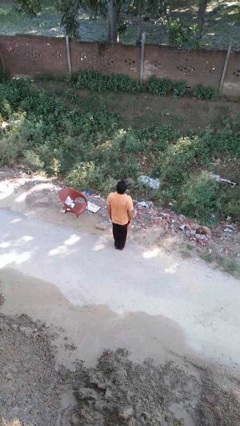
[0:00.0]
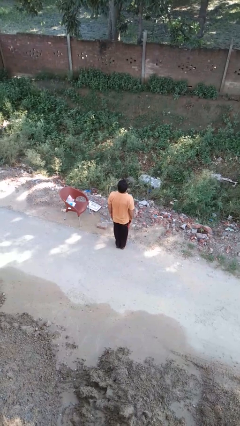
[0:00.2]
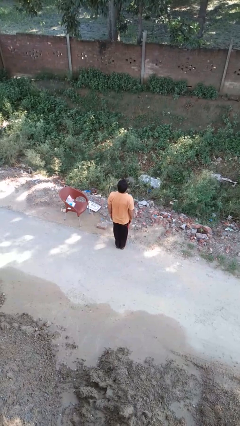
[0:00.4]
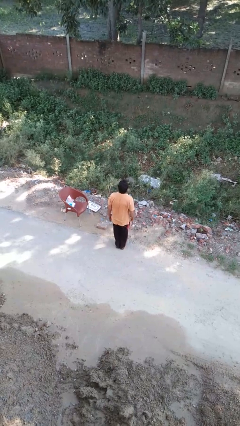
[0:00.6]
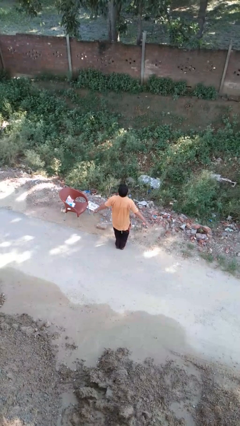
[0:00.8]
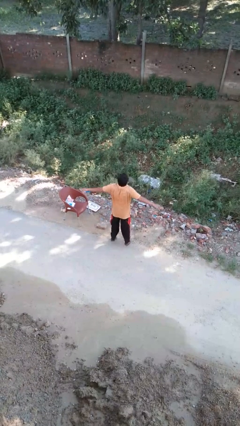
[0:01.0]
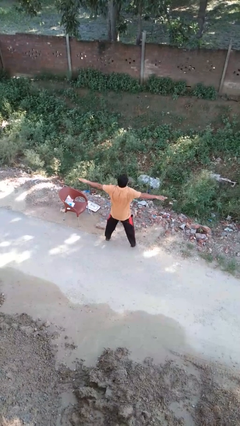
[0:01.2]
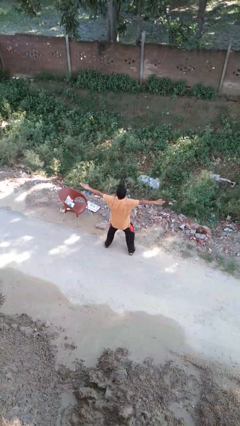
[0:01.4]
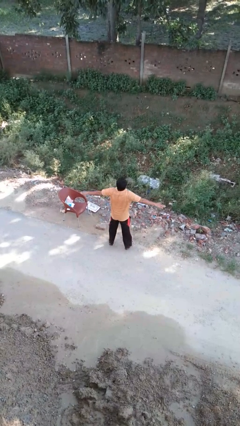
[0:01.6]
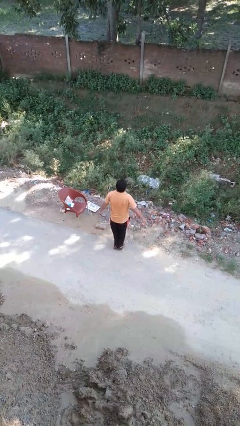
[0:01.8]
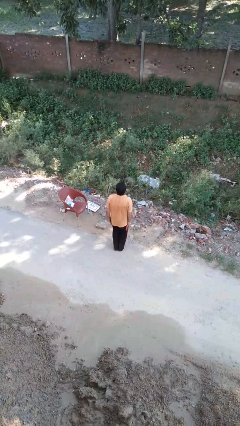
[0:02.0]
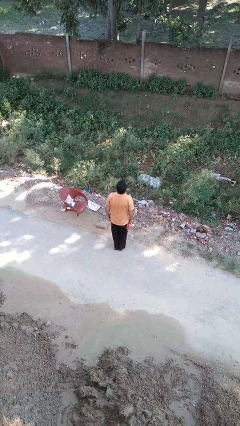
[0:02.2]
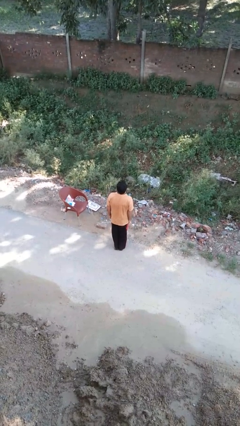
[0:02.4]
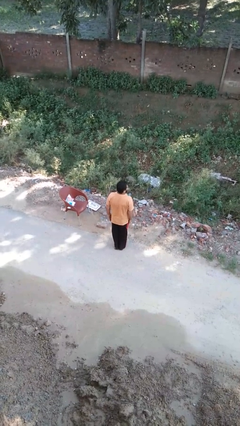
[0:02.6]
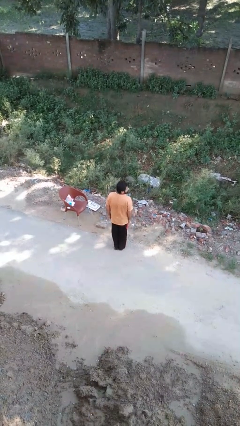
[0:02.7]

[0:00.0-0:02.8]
person exercises with jumping jacks

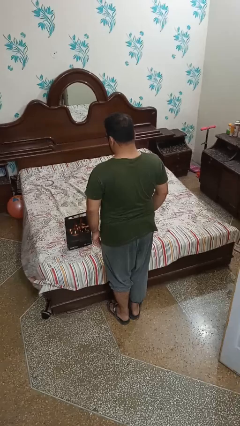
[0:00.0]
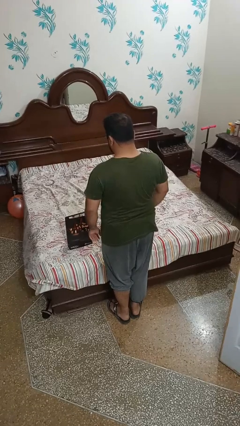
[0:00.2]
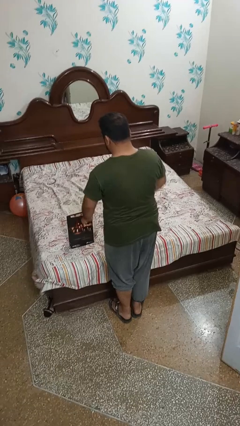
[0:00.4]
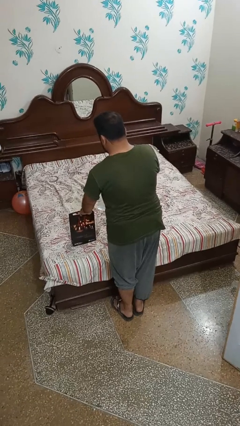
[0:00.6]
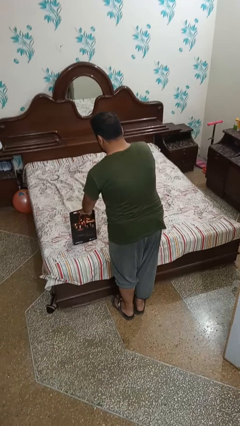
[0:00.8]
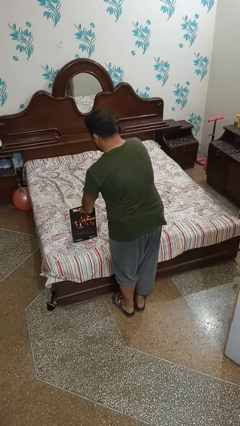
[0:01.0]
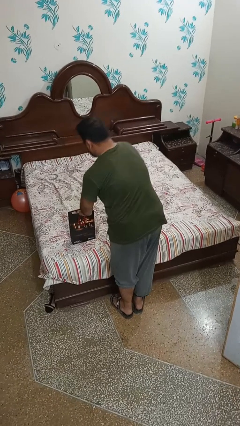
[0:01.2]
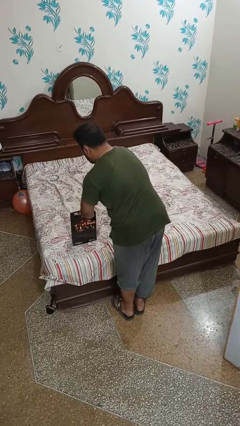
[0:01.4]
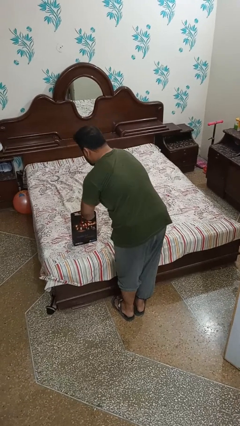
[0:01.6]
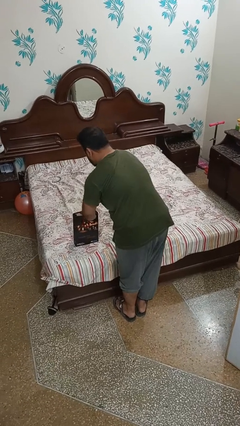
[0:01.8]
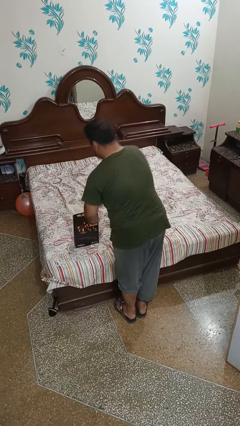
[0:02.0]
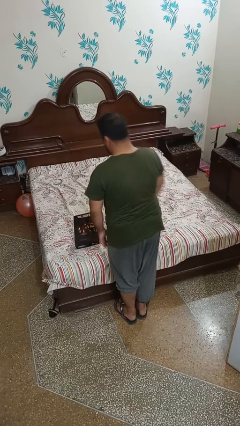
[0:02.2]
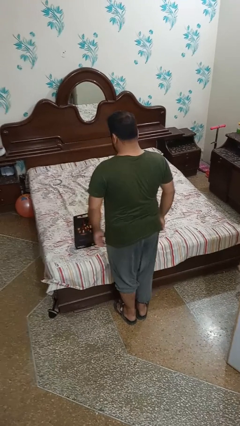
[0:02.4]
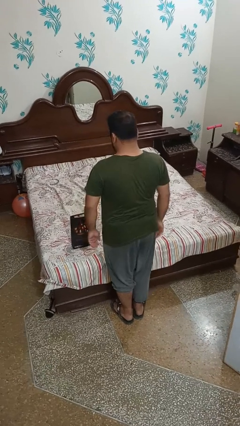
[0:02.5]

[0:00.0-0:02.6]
person puts object into bag

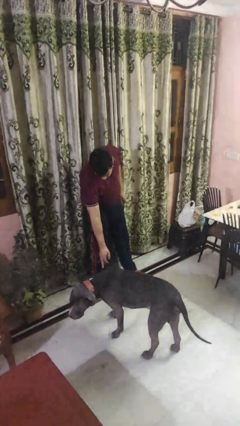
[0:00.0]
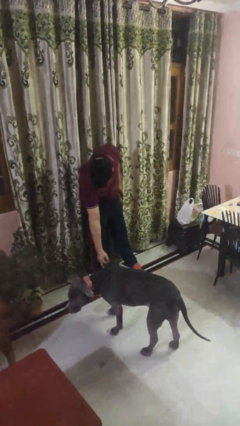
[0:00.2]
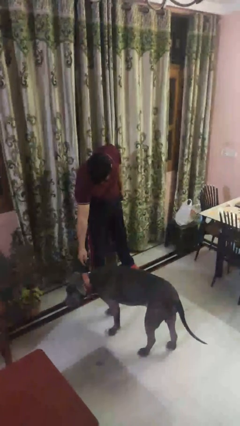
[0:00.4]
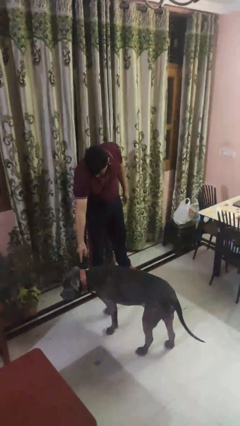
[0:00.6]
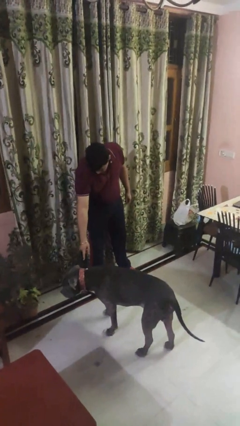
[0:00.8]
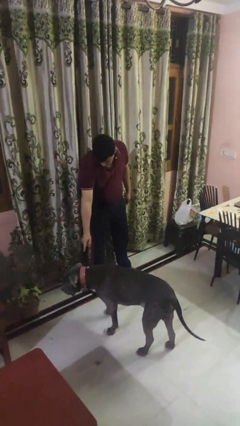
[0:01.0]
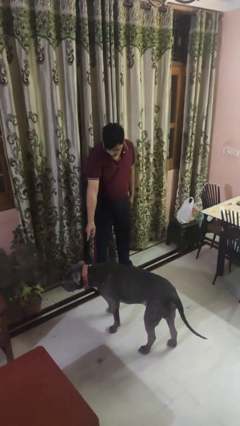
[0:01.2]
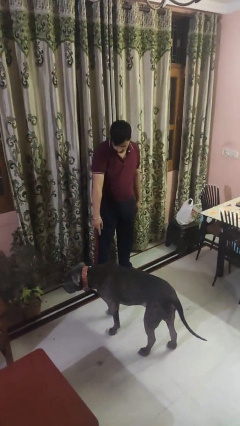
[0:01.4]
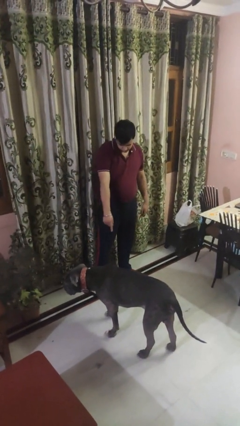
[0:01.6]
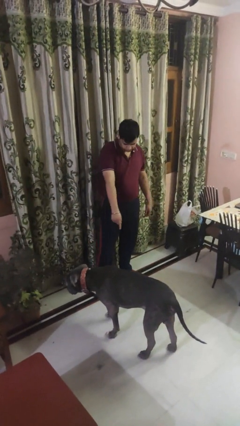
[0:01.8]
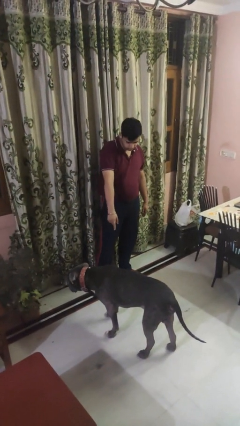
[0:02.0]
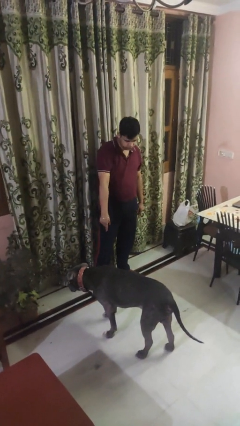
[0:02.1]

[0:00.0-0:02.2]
person points to dog

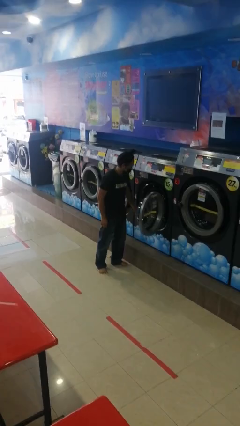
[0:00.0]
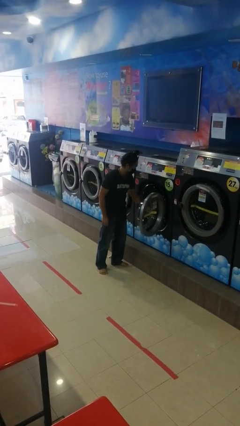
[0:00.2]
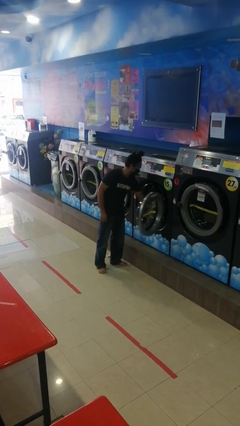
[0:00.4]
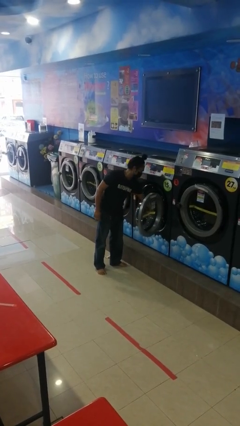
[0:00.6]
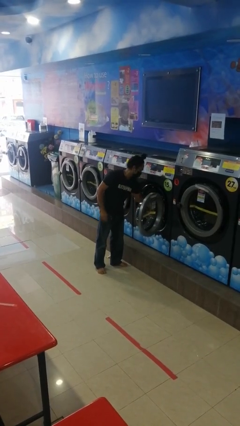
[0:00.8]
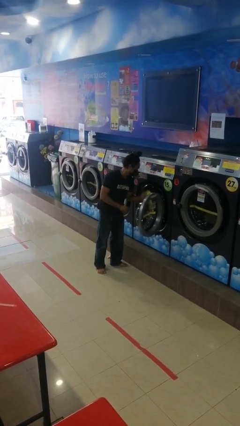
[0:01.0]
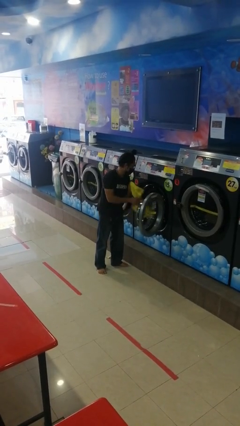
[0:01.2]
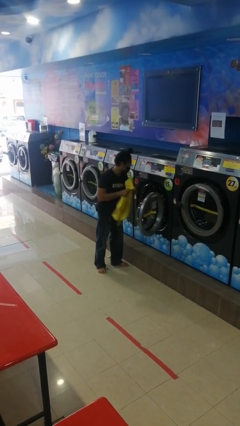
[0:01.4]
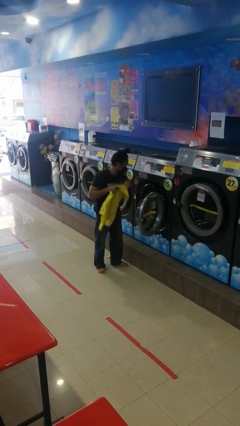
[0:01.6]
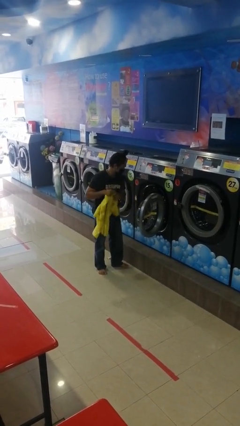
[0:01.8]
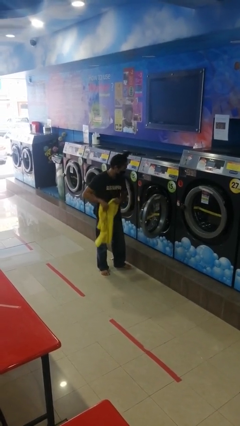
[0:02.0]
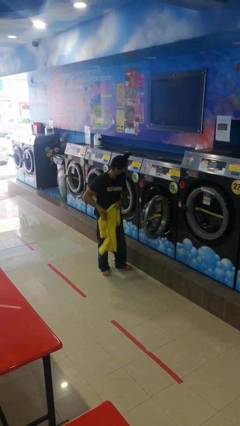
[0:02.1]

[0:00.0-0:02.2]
person unloads clotheswasher

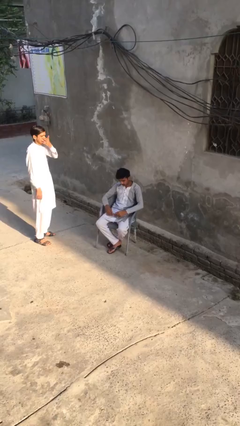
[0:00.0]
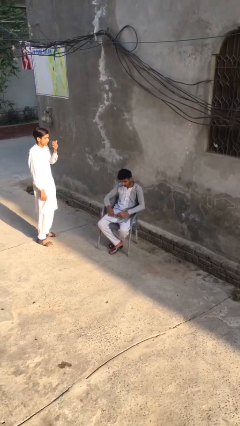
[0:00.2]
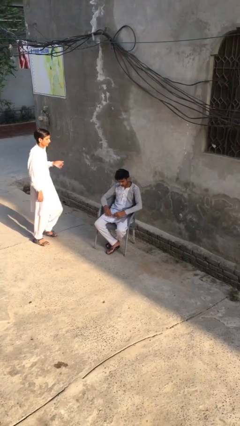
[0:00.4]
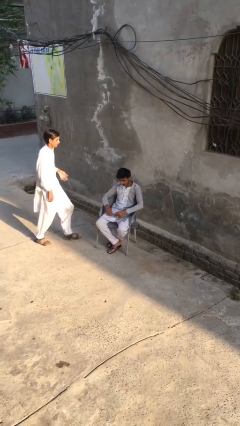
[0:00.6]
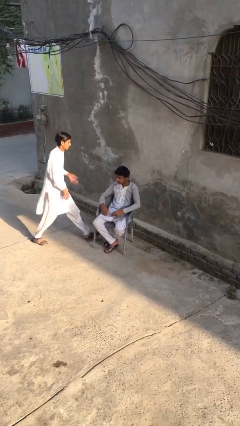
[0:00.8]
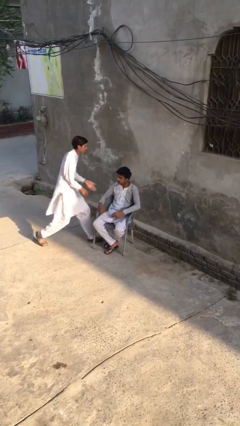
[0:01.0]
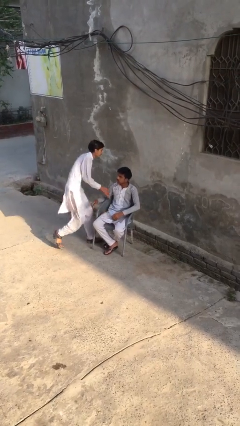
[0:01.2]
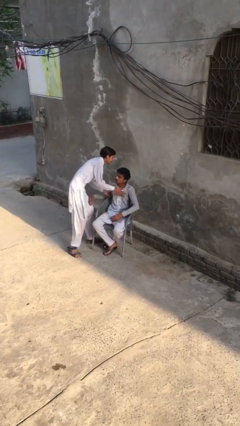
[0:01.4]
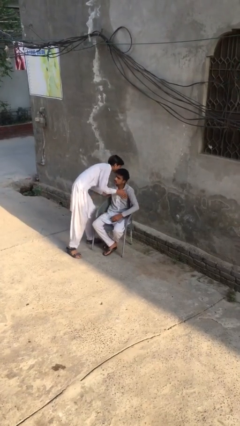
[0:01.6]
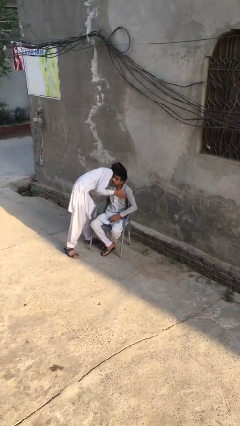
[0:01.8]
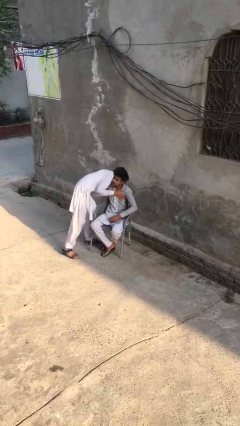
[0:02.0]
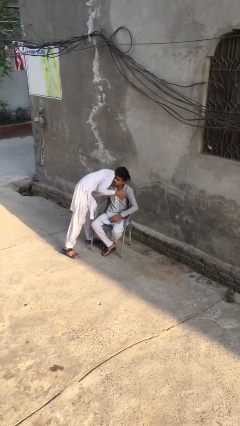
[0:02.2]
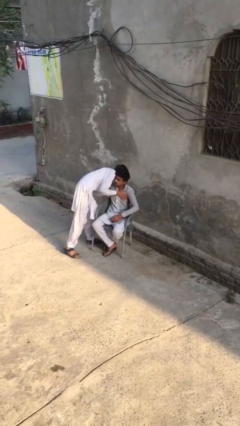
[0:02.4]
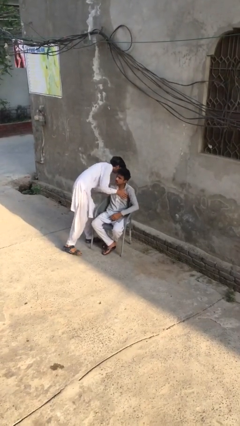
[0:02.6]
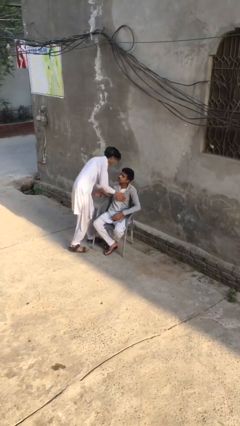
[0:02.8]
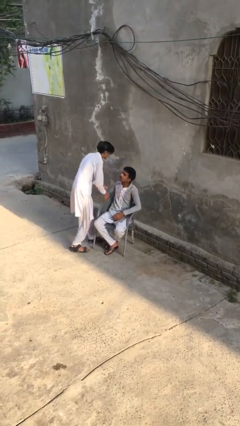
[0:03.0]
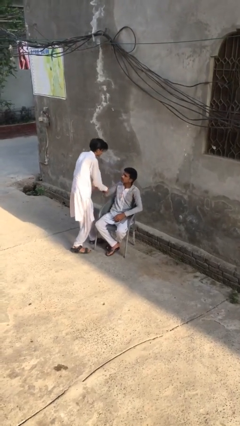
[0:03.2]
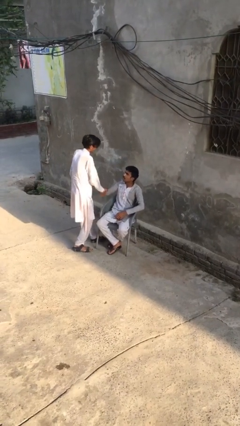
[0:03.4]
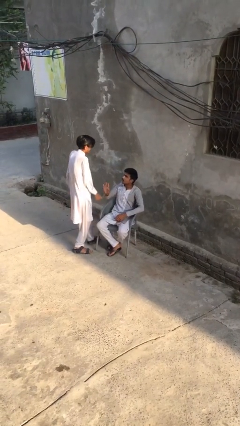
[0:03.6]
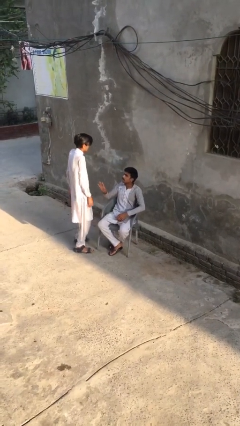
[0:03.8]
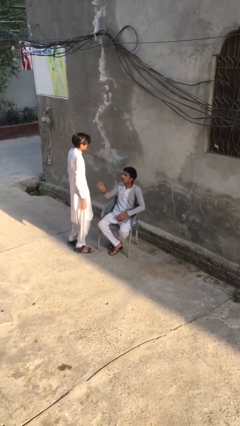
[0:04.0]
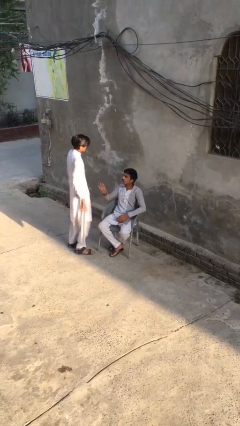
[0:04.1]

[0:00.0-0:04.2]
person embraces person

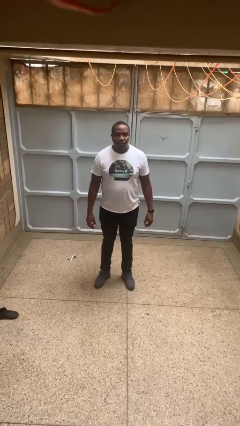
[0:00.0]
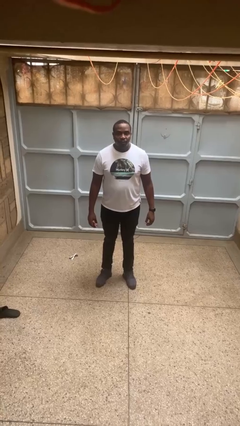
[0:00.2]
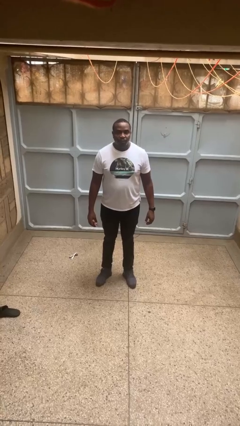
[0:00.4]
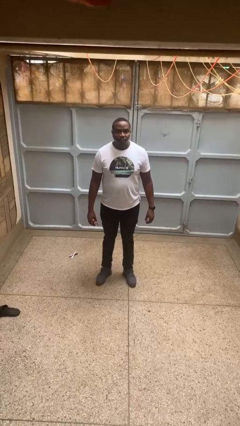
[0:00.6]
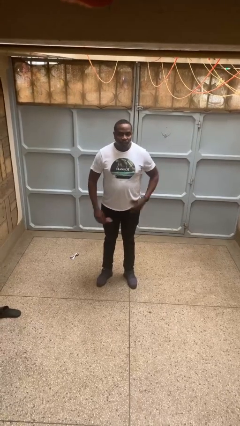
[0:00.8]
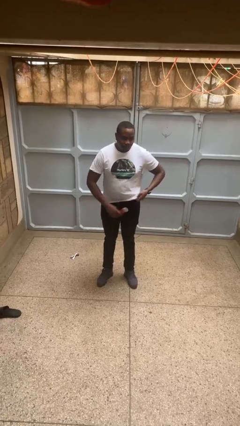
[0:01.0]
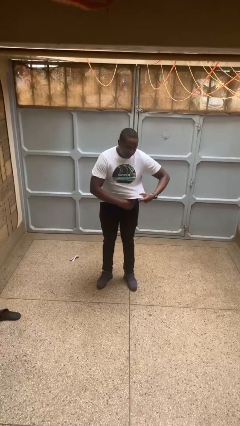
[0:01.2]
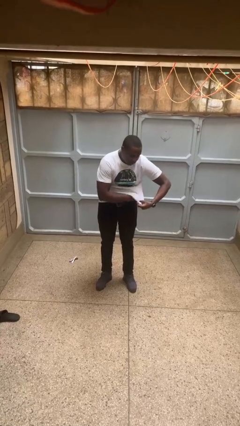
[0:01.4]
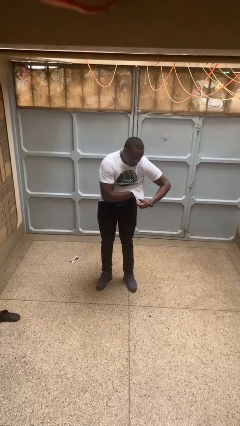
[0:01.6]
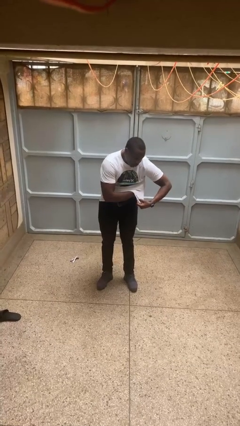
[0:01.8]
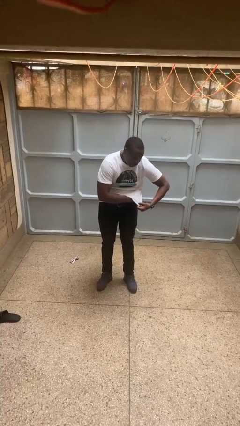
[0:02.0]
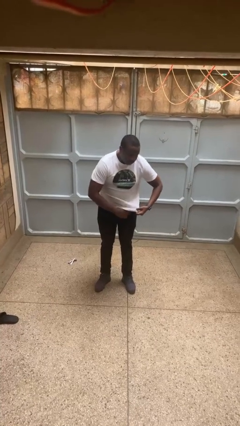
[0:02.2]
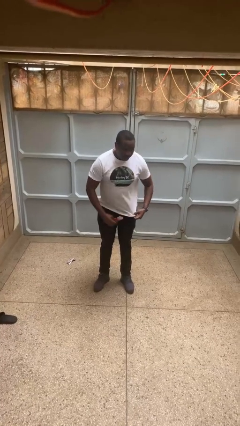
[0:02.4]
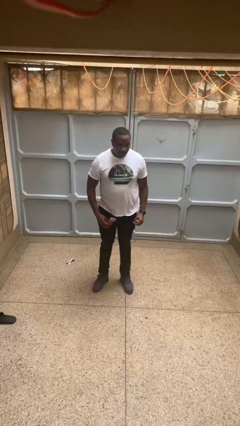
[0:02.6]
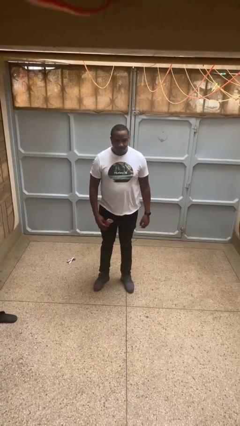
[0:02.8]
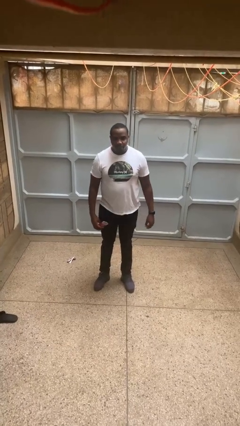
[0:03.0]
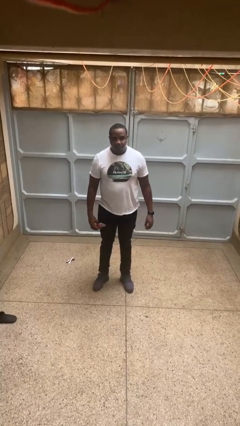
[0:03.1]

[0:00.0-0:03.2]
person applies deodorant
